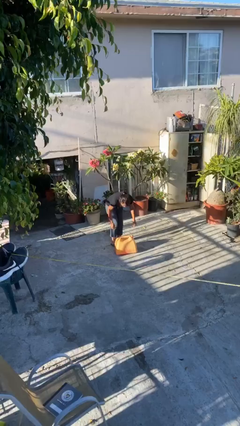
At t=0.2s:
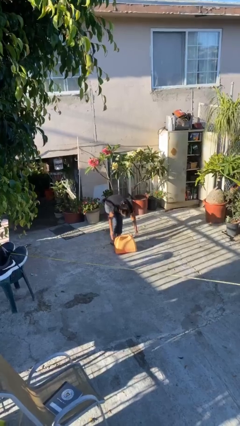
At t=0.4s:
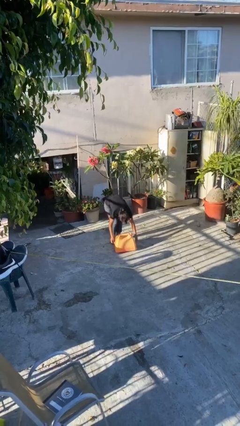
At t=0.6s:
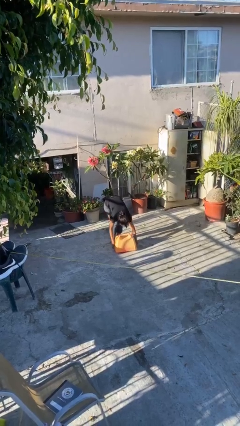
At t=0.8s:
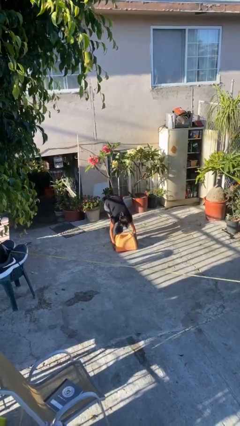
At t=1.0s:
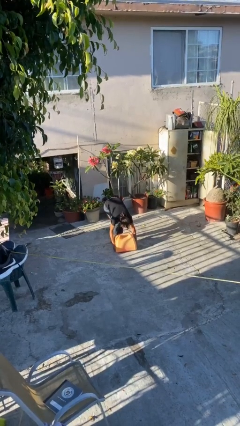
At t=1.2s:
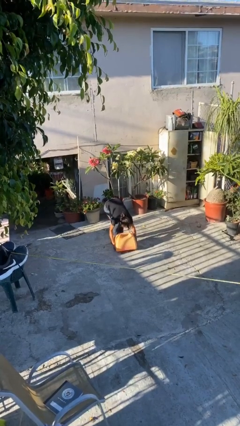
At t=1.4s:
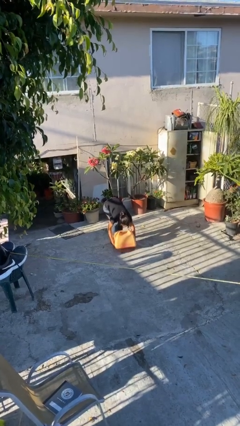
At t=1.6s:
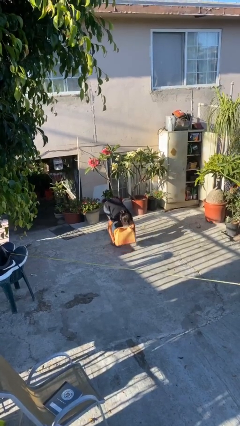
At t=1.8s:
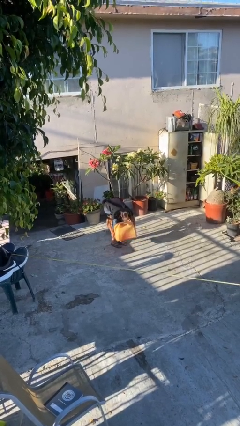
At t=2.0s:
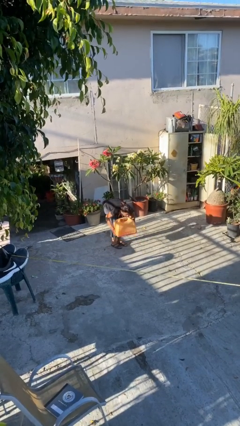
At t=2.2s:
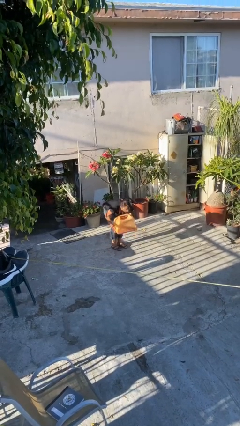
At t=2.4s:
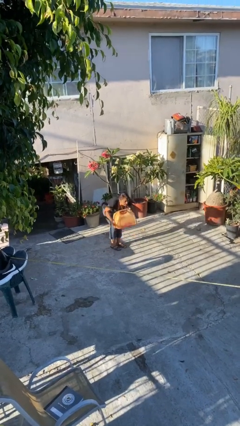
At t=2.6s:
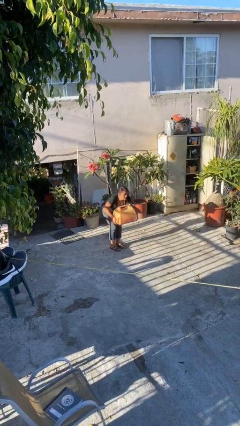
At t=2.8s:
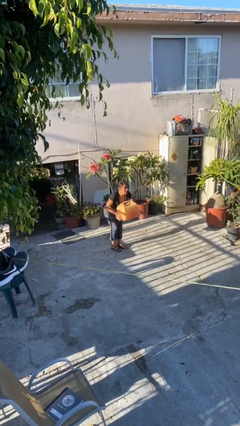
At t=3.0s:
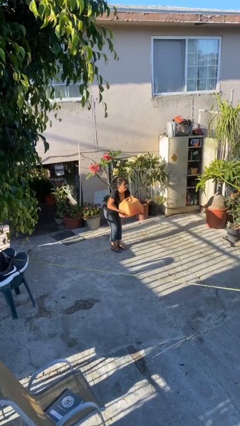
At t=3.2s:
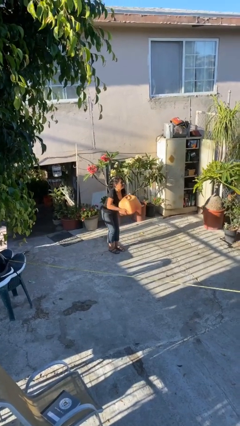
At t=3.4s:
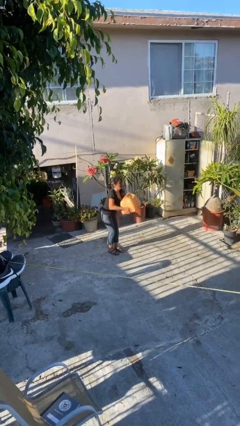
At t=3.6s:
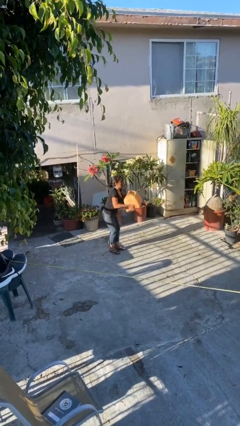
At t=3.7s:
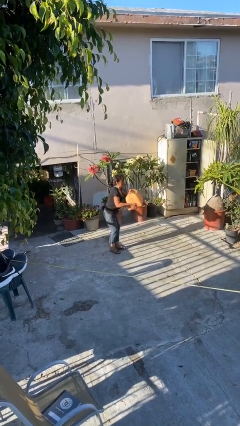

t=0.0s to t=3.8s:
person picks up object from floor

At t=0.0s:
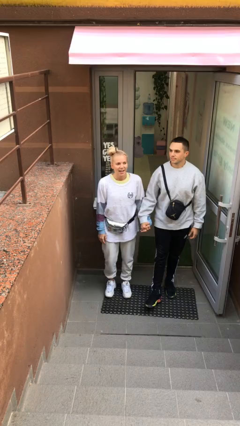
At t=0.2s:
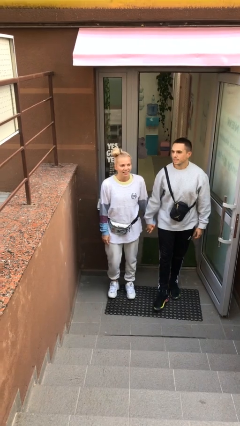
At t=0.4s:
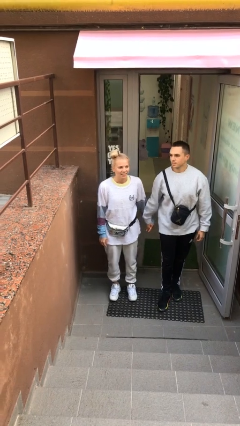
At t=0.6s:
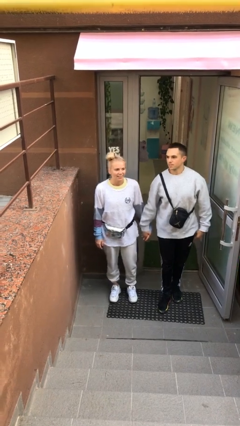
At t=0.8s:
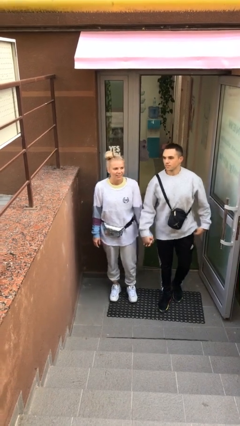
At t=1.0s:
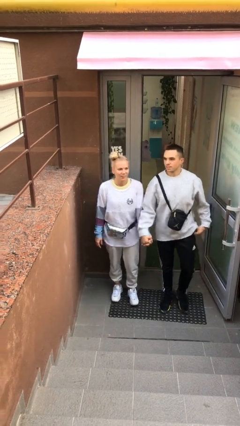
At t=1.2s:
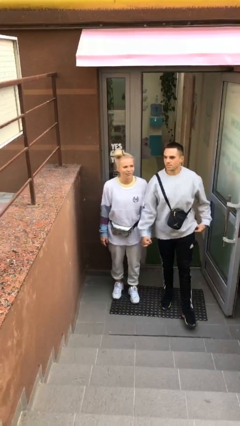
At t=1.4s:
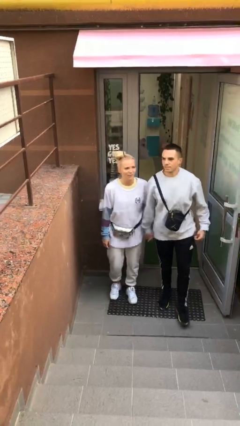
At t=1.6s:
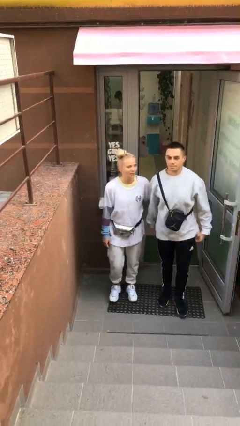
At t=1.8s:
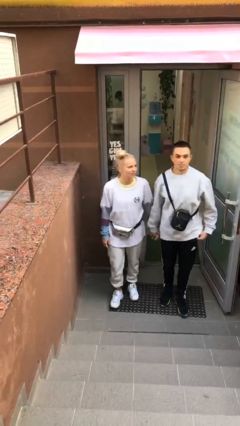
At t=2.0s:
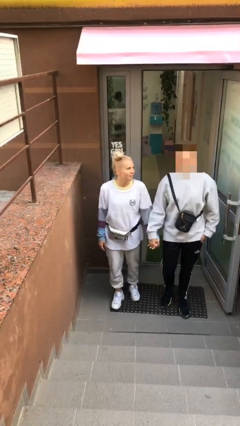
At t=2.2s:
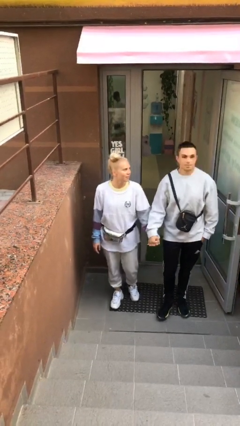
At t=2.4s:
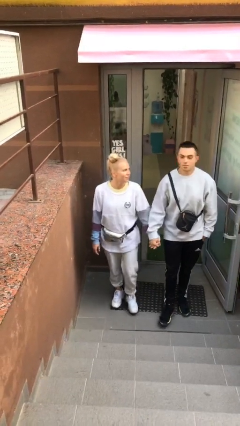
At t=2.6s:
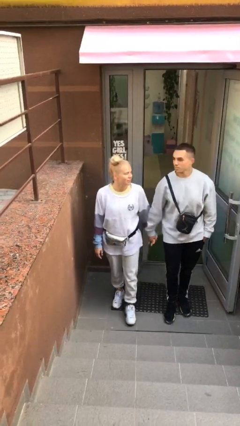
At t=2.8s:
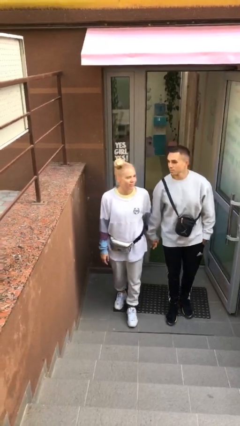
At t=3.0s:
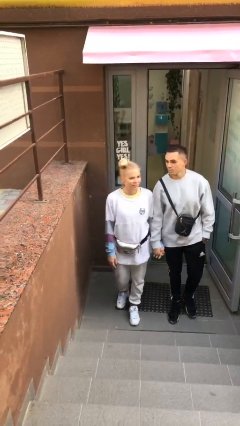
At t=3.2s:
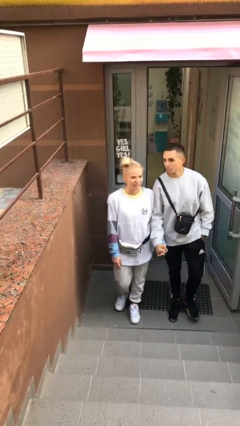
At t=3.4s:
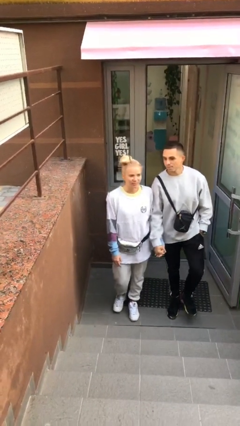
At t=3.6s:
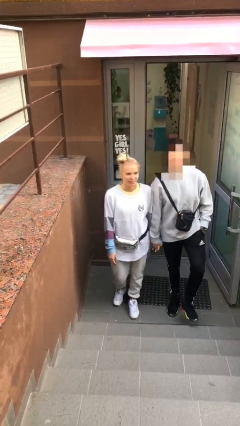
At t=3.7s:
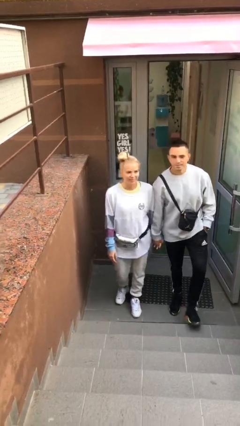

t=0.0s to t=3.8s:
person holds hand

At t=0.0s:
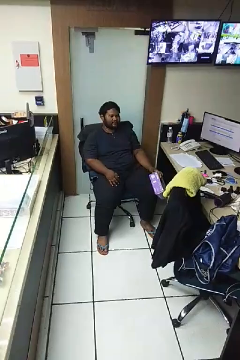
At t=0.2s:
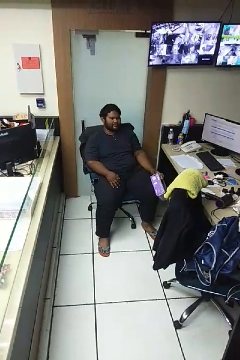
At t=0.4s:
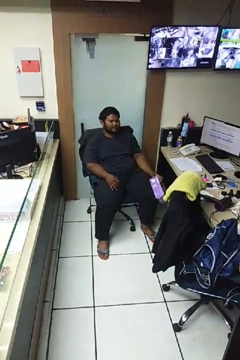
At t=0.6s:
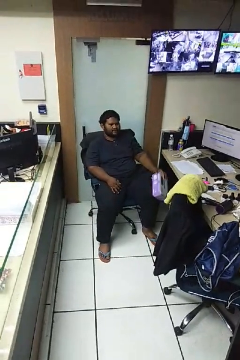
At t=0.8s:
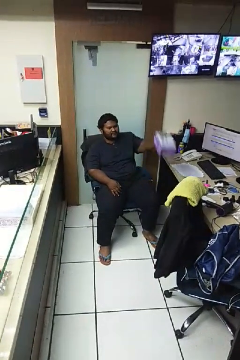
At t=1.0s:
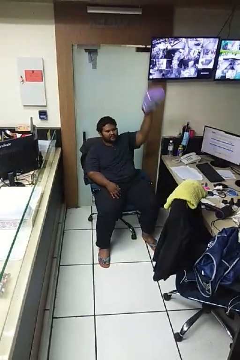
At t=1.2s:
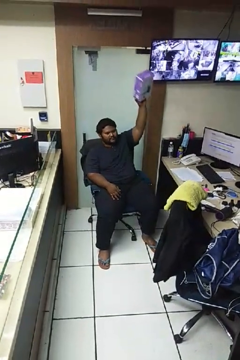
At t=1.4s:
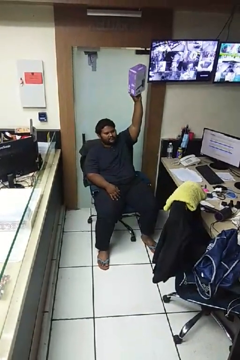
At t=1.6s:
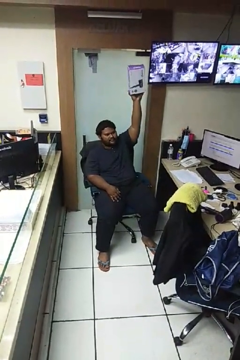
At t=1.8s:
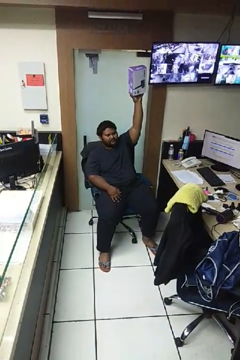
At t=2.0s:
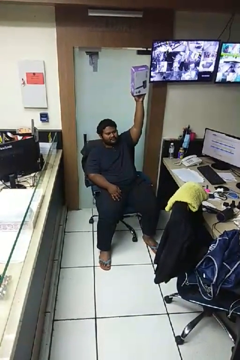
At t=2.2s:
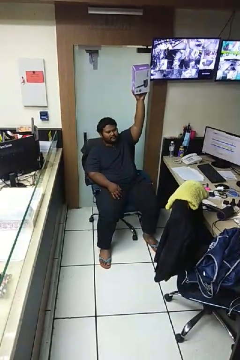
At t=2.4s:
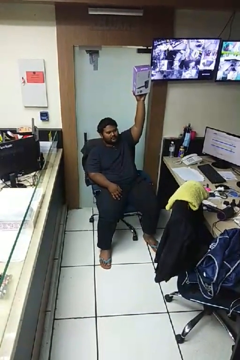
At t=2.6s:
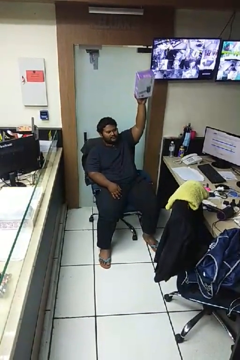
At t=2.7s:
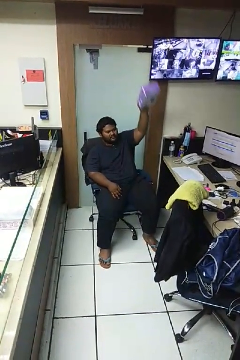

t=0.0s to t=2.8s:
person holds object above head

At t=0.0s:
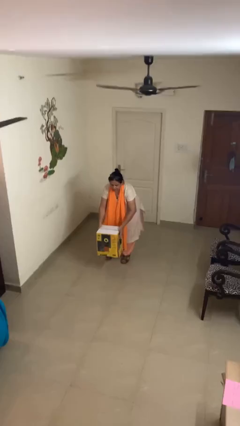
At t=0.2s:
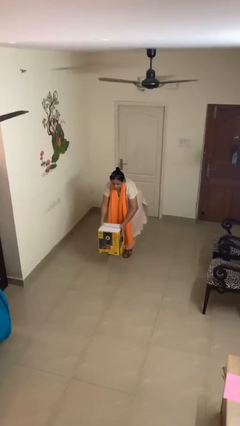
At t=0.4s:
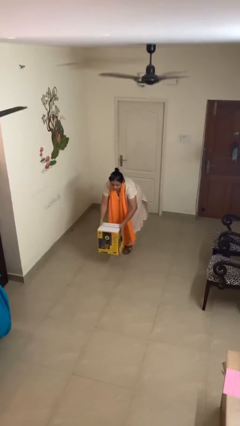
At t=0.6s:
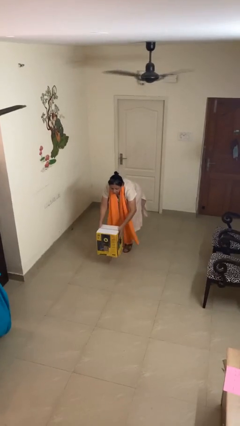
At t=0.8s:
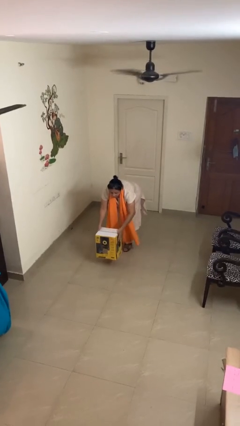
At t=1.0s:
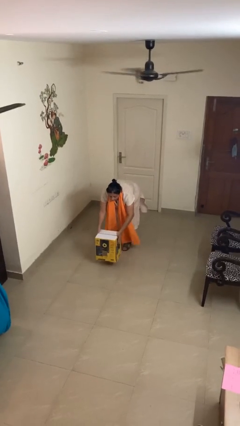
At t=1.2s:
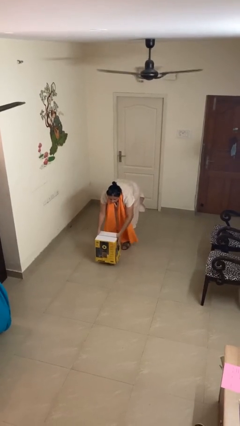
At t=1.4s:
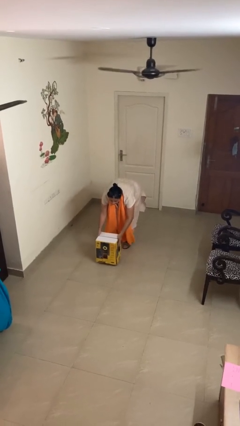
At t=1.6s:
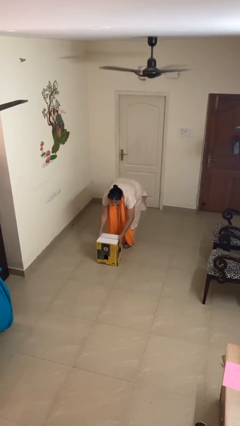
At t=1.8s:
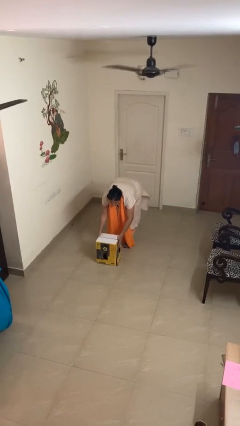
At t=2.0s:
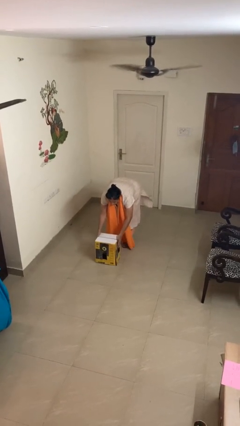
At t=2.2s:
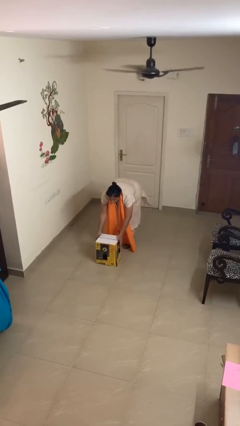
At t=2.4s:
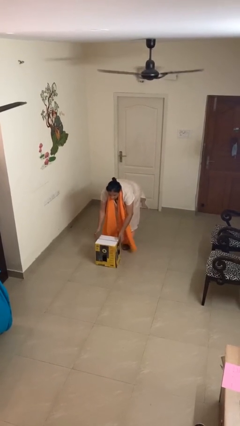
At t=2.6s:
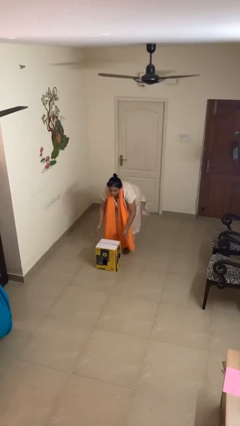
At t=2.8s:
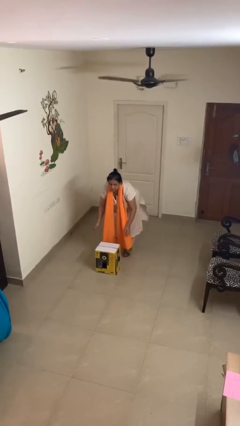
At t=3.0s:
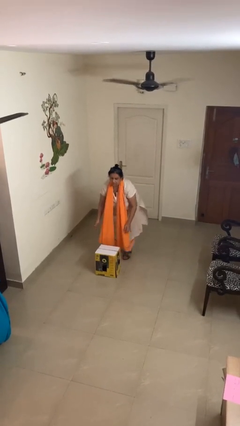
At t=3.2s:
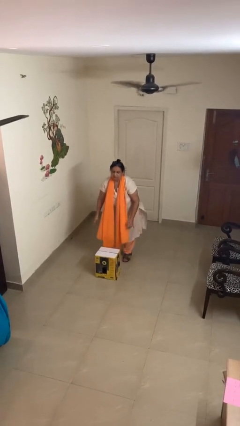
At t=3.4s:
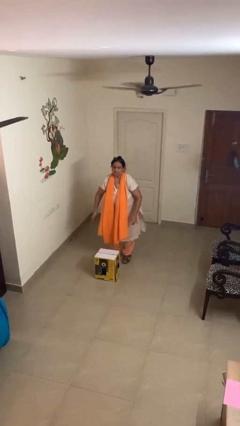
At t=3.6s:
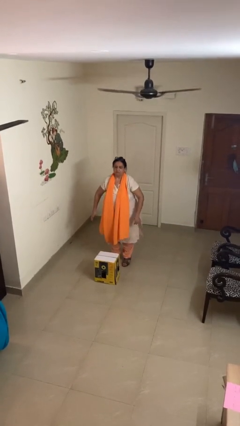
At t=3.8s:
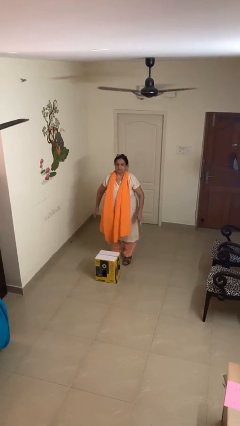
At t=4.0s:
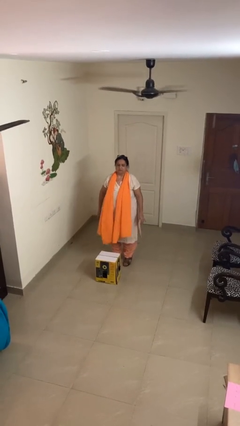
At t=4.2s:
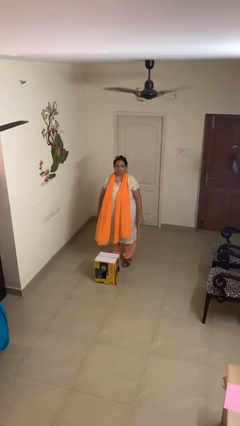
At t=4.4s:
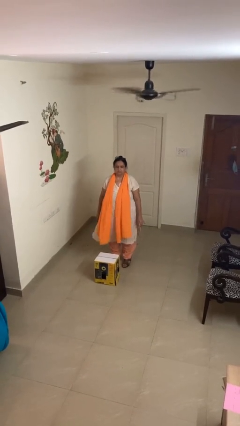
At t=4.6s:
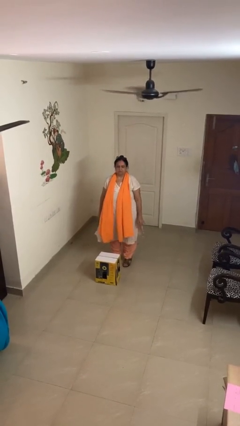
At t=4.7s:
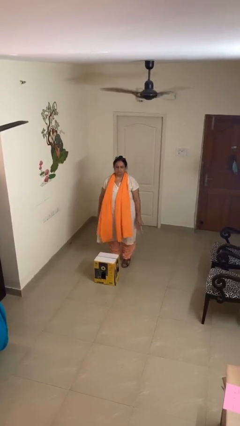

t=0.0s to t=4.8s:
person puts down object on floor

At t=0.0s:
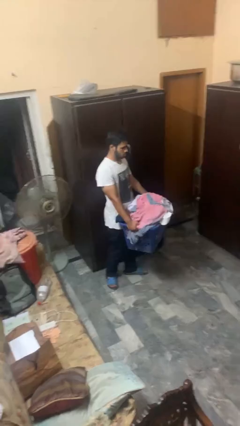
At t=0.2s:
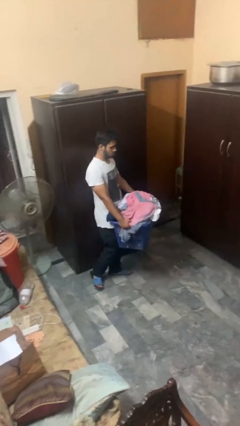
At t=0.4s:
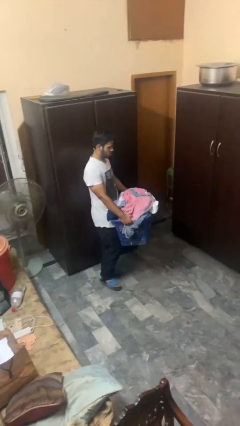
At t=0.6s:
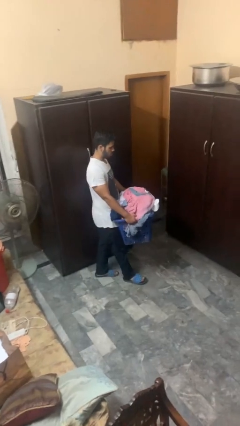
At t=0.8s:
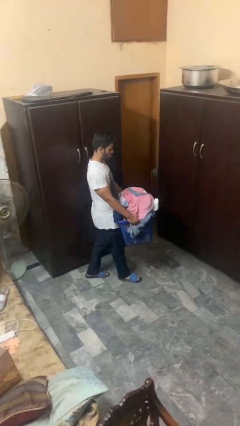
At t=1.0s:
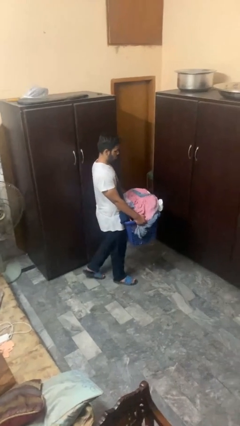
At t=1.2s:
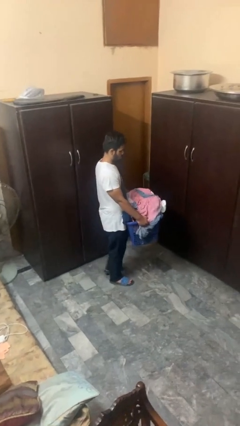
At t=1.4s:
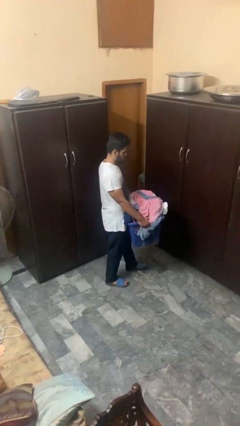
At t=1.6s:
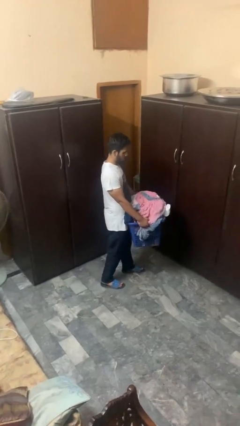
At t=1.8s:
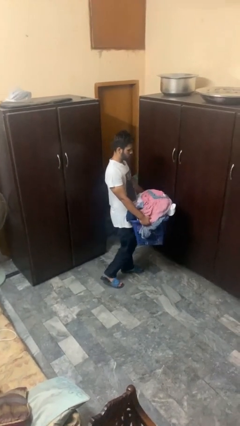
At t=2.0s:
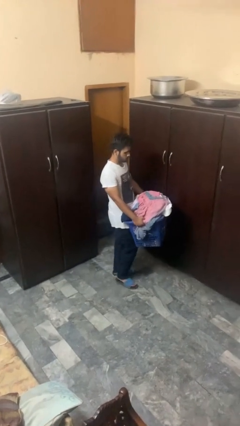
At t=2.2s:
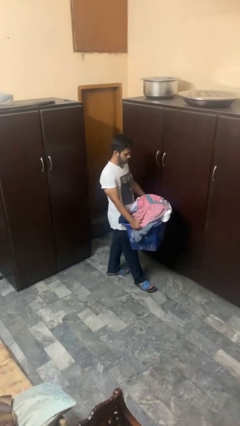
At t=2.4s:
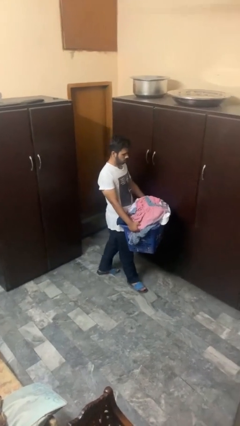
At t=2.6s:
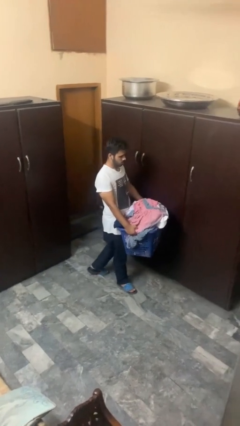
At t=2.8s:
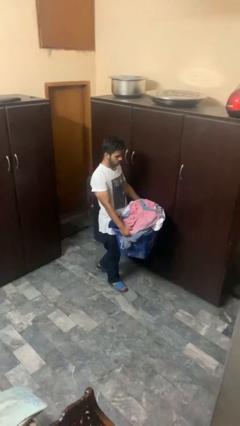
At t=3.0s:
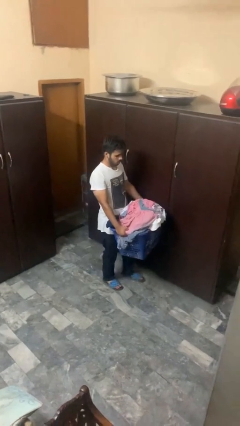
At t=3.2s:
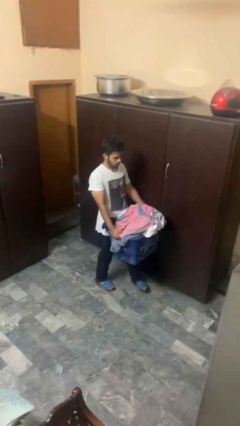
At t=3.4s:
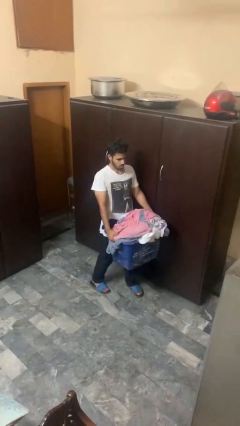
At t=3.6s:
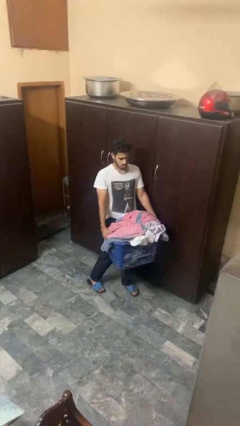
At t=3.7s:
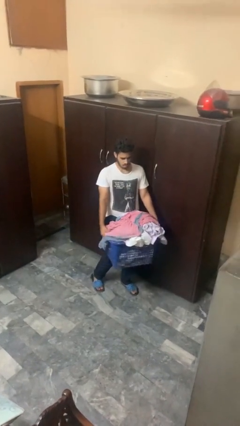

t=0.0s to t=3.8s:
person carries laundry basket
